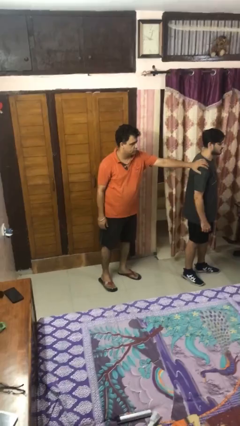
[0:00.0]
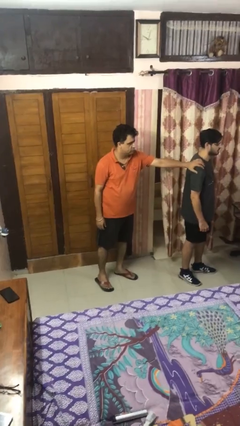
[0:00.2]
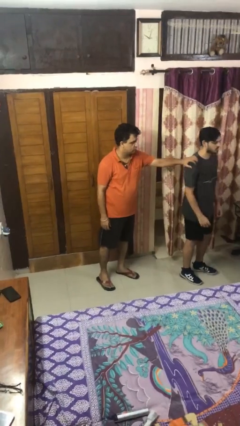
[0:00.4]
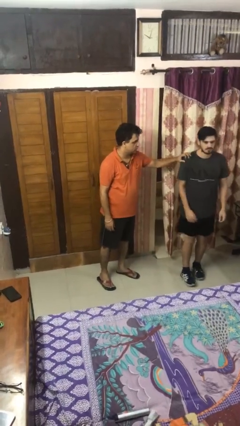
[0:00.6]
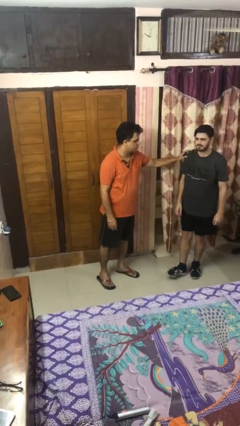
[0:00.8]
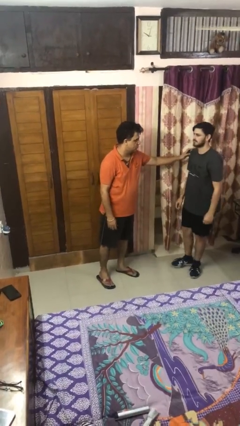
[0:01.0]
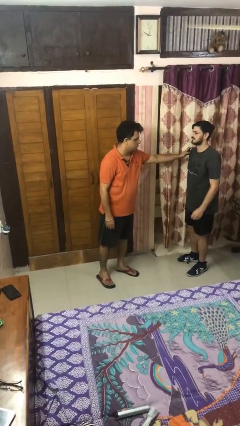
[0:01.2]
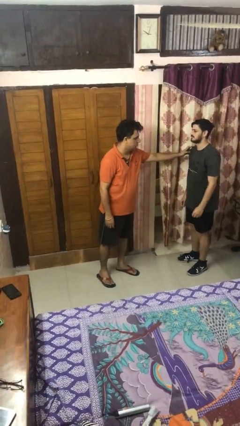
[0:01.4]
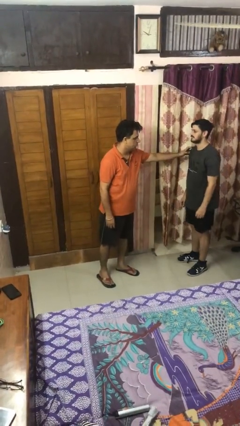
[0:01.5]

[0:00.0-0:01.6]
person spins person around

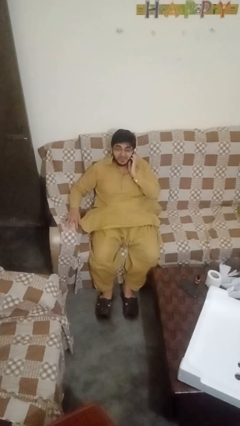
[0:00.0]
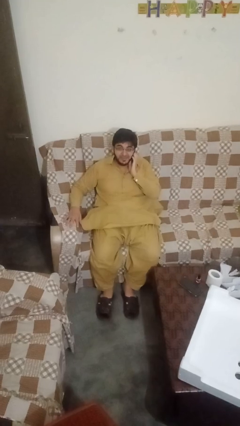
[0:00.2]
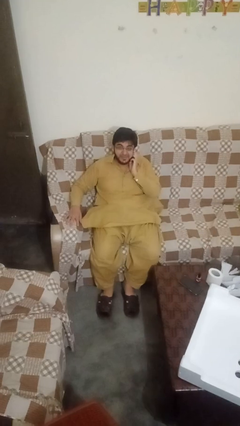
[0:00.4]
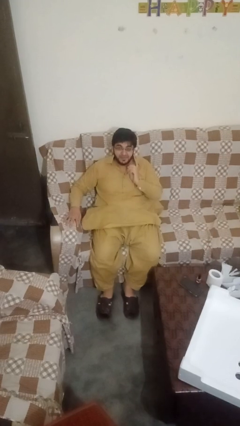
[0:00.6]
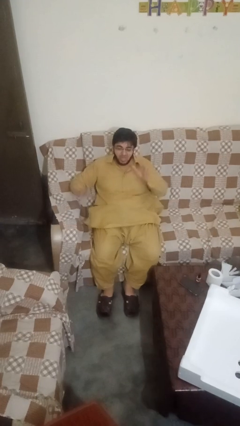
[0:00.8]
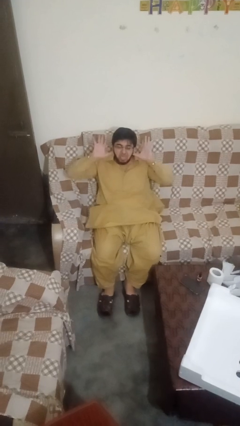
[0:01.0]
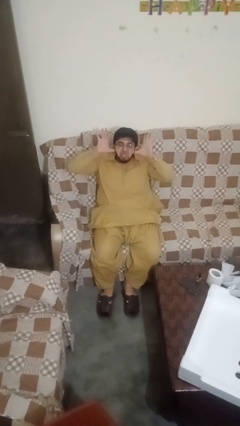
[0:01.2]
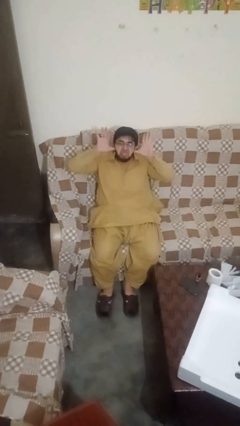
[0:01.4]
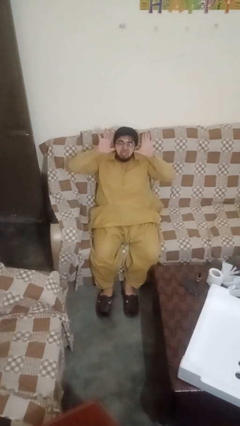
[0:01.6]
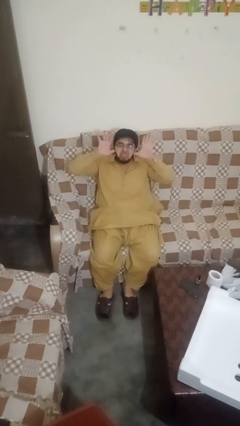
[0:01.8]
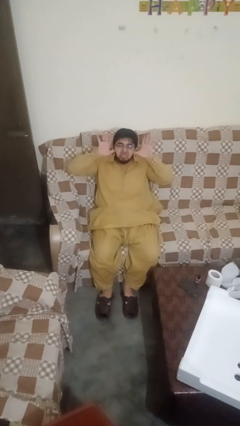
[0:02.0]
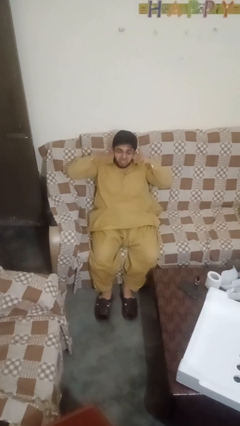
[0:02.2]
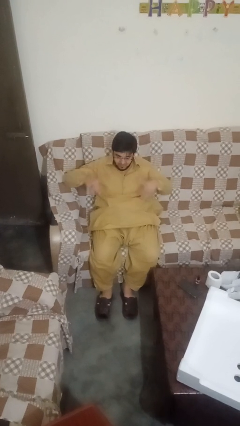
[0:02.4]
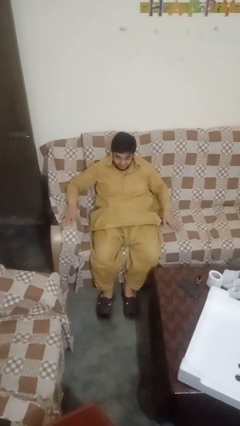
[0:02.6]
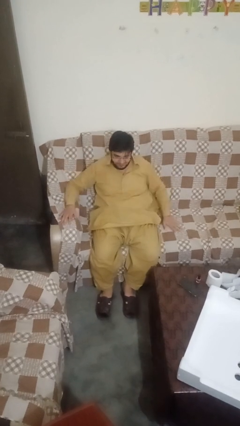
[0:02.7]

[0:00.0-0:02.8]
person sticks out tongue

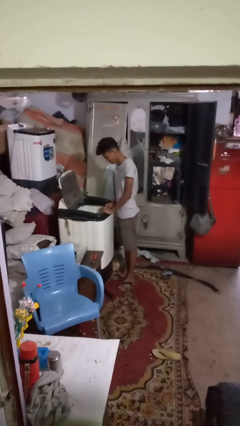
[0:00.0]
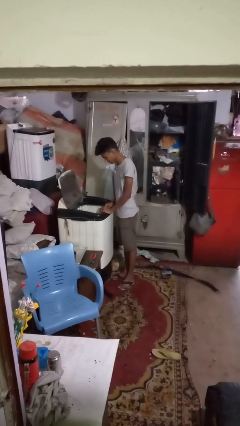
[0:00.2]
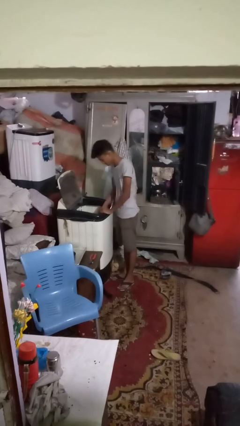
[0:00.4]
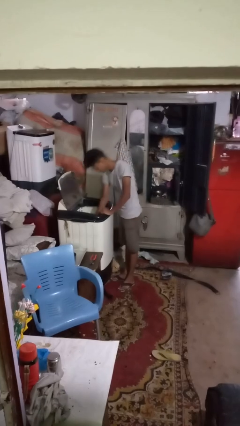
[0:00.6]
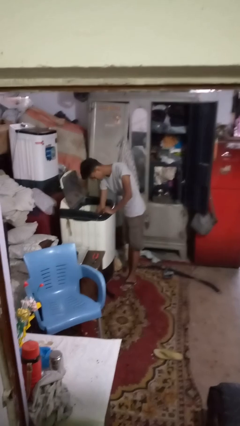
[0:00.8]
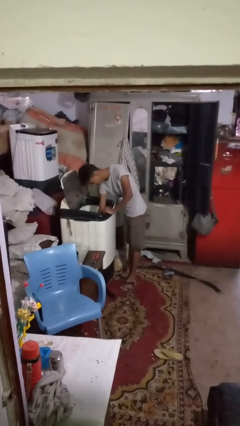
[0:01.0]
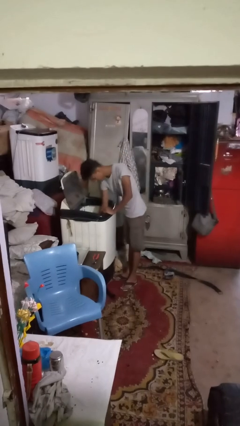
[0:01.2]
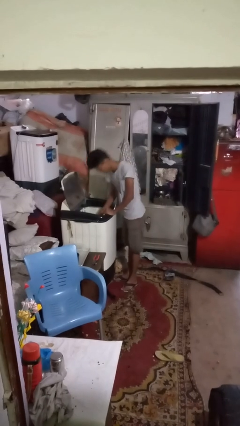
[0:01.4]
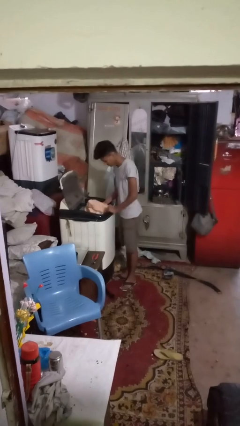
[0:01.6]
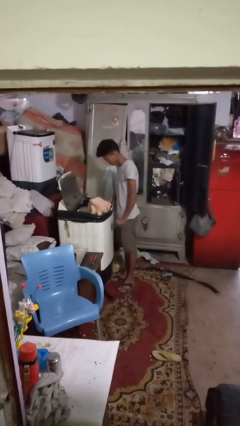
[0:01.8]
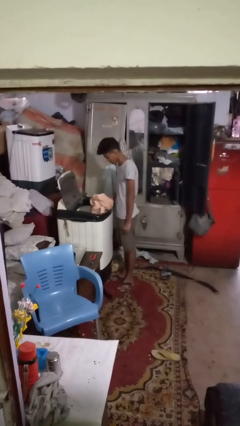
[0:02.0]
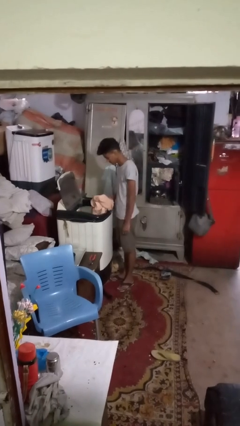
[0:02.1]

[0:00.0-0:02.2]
person unloads clotheswasher

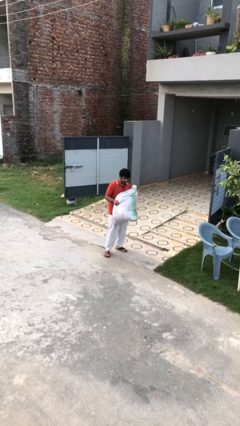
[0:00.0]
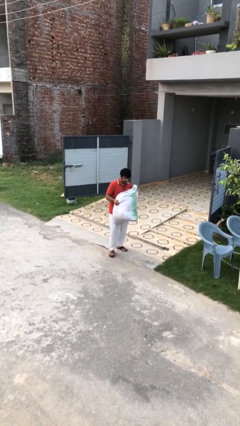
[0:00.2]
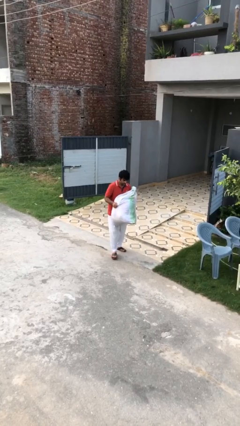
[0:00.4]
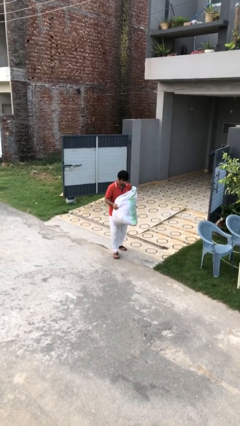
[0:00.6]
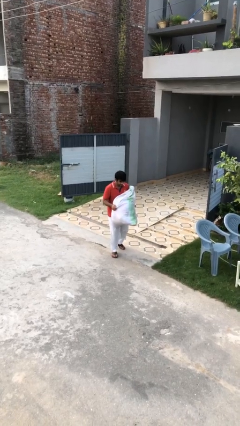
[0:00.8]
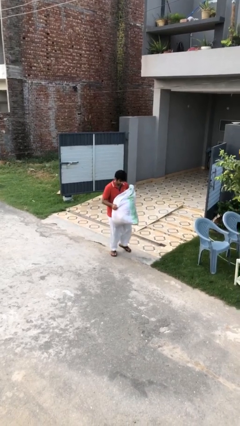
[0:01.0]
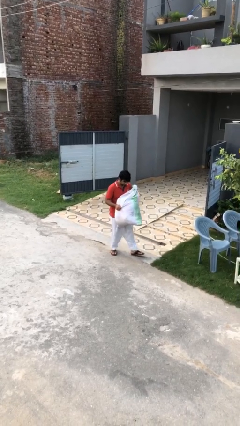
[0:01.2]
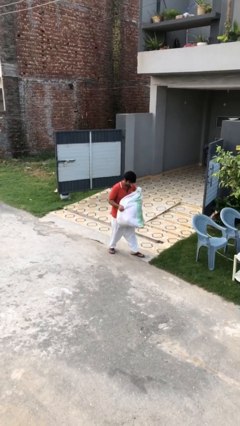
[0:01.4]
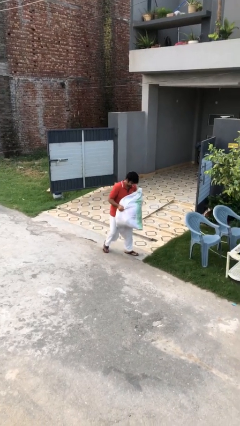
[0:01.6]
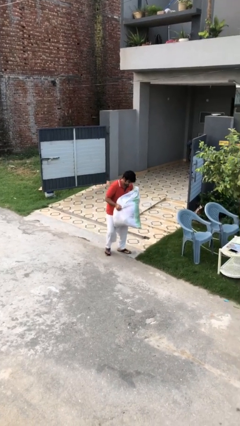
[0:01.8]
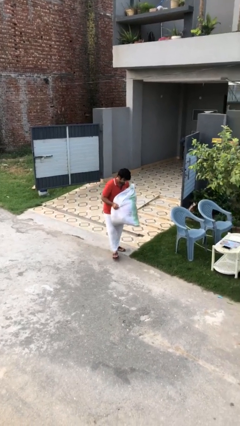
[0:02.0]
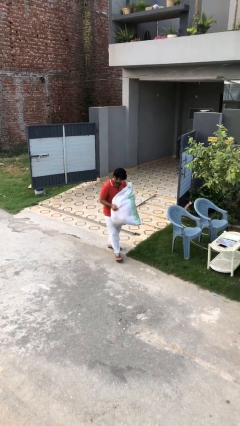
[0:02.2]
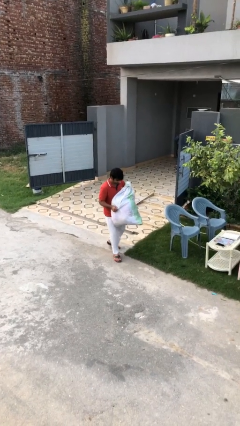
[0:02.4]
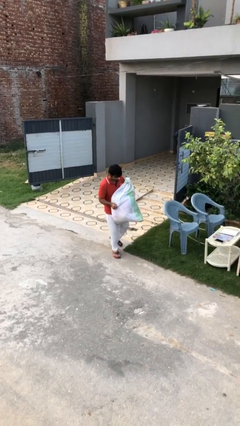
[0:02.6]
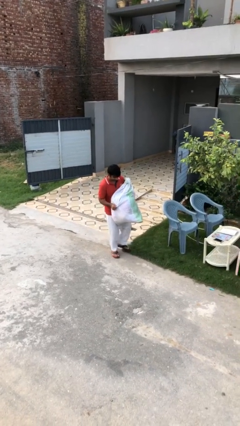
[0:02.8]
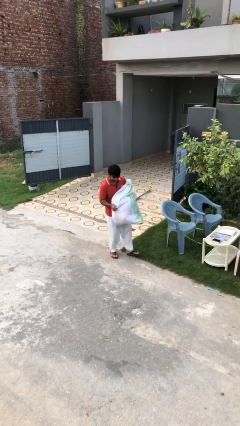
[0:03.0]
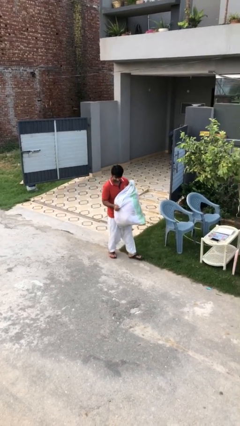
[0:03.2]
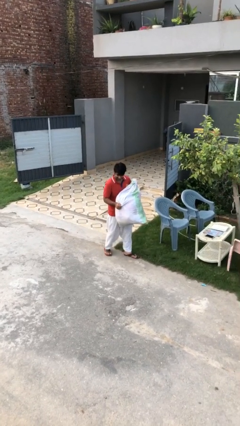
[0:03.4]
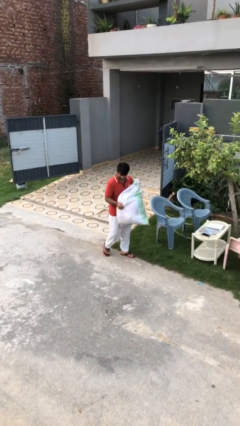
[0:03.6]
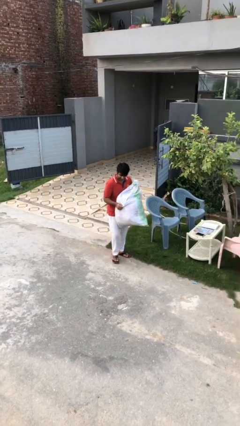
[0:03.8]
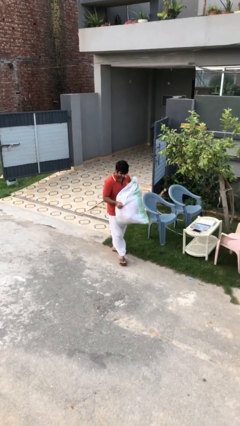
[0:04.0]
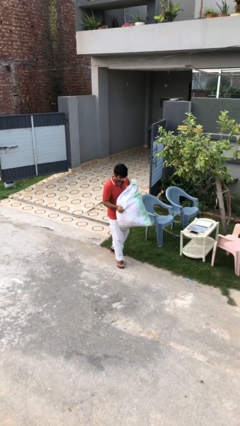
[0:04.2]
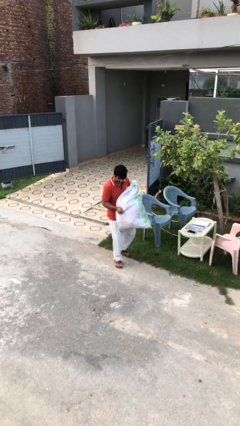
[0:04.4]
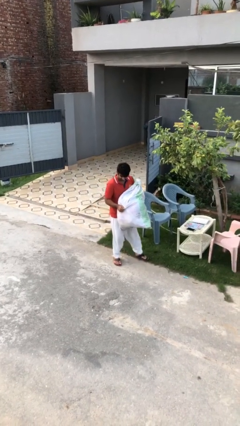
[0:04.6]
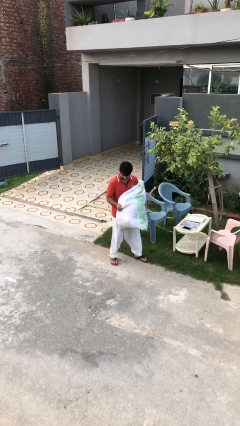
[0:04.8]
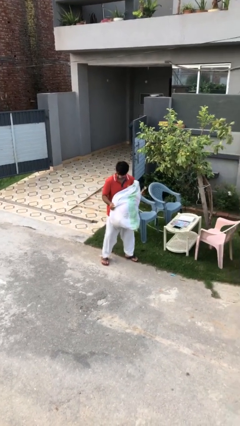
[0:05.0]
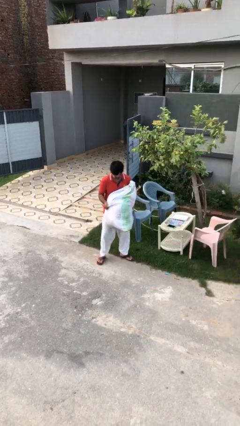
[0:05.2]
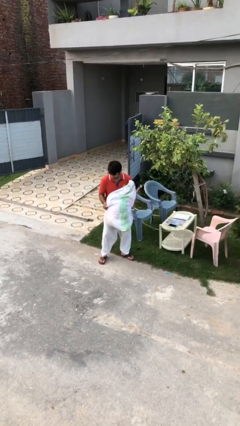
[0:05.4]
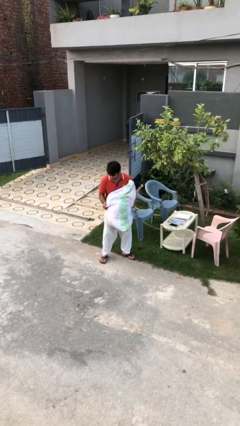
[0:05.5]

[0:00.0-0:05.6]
person carries heavy object

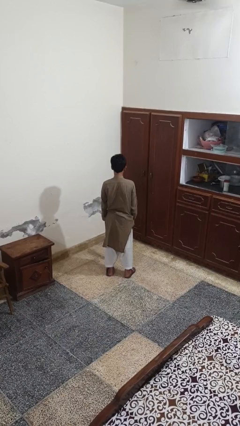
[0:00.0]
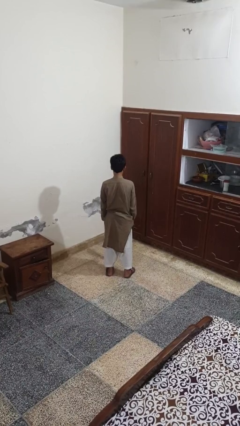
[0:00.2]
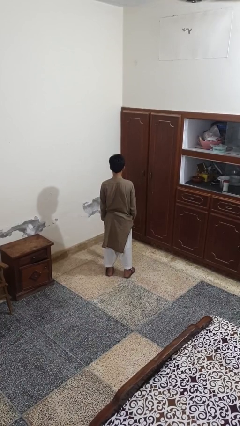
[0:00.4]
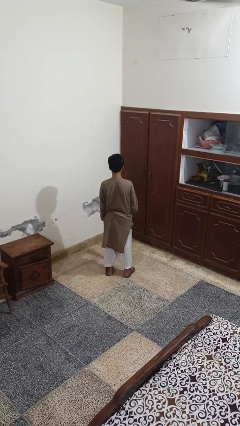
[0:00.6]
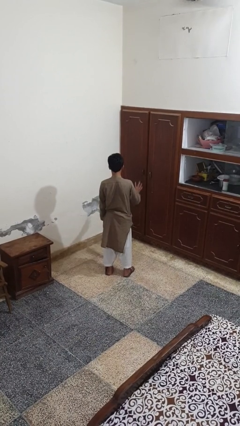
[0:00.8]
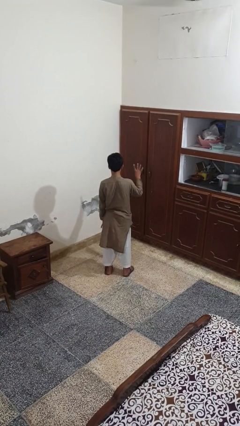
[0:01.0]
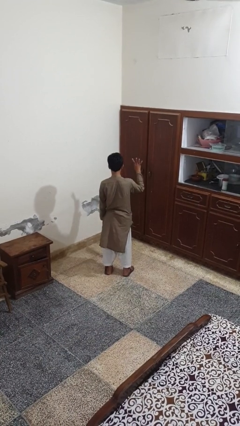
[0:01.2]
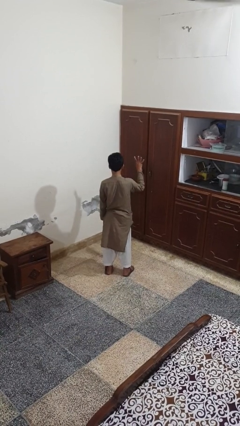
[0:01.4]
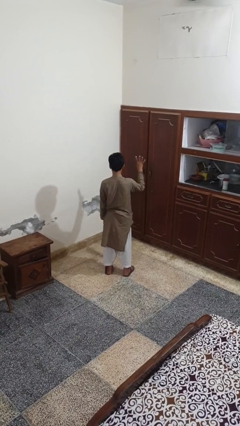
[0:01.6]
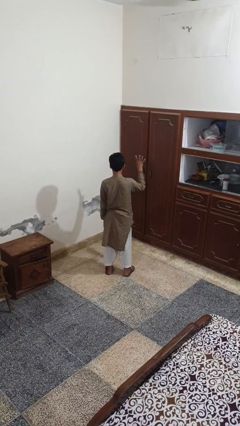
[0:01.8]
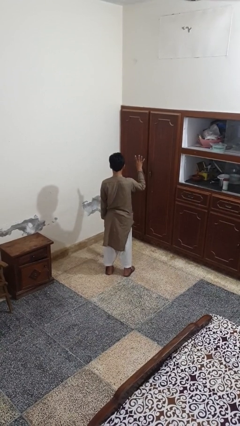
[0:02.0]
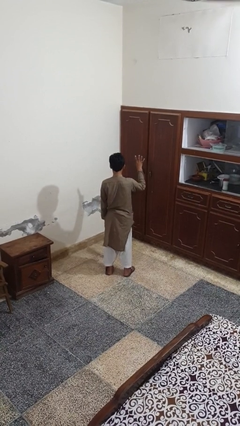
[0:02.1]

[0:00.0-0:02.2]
person gestures number four

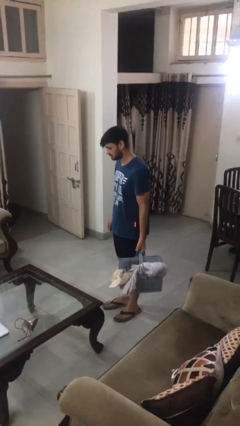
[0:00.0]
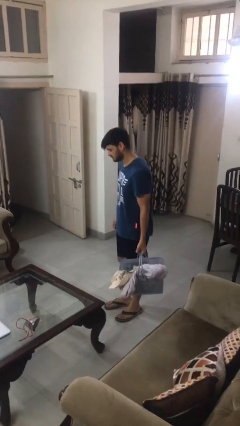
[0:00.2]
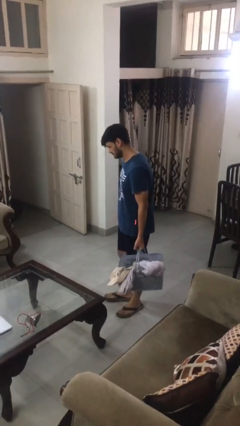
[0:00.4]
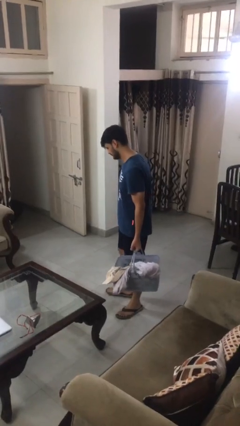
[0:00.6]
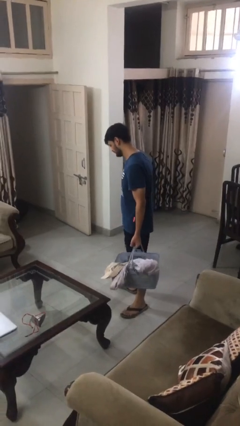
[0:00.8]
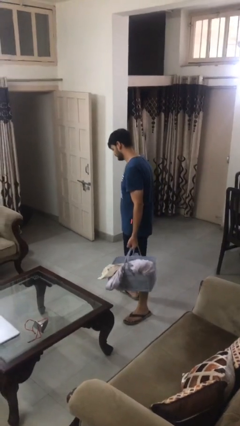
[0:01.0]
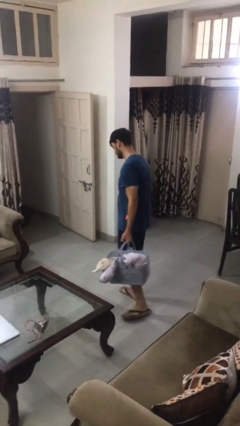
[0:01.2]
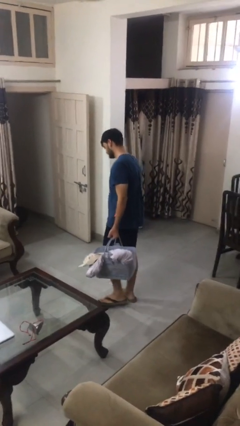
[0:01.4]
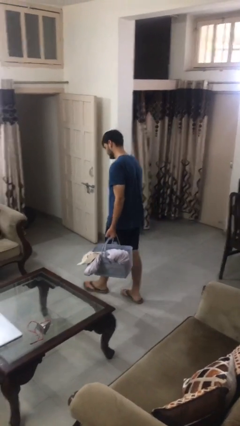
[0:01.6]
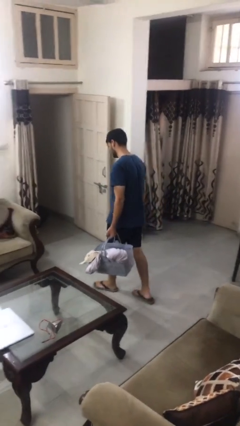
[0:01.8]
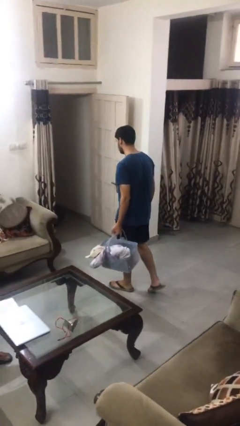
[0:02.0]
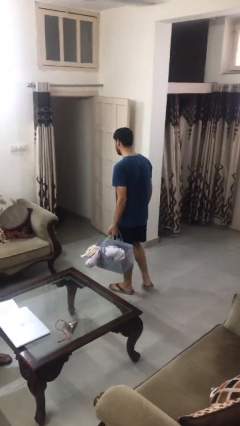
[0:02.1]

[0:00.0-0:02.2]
person carries laundry basket

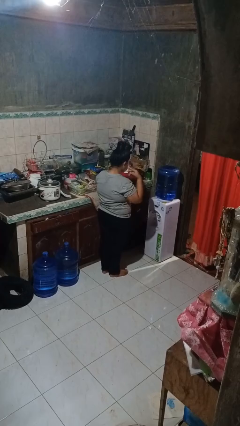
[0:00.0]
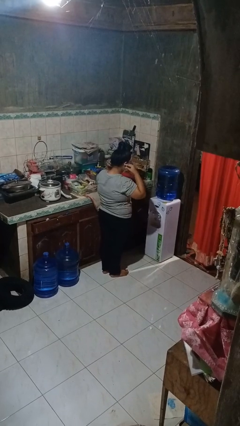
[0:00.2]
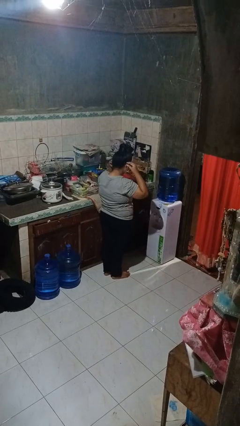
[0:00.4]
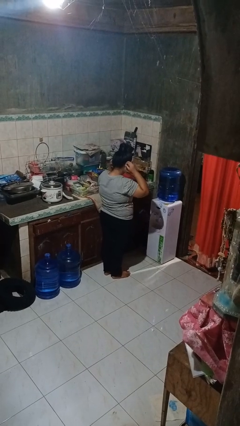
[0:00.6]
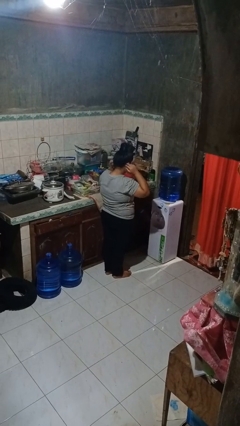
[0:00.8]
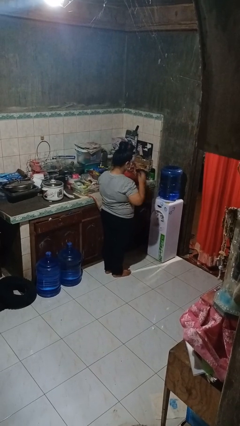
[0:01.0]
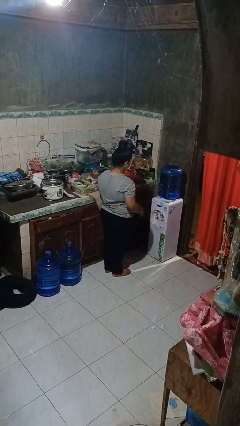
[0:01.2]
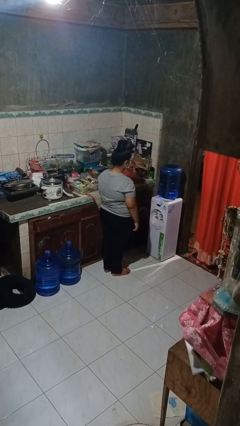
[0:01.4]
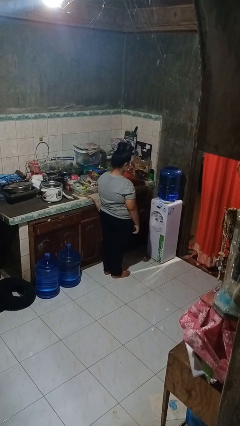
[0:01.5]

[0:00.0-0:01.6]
person puts on facemask
